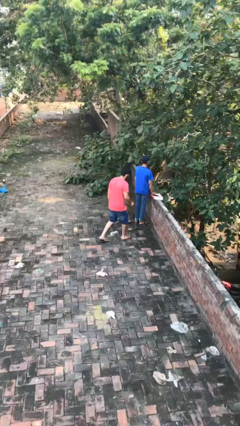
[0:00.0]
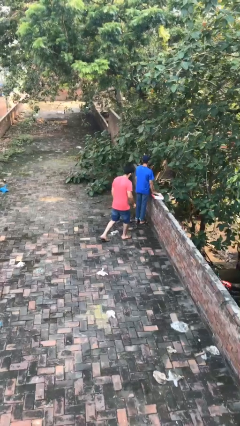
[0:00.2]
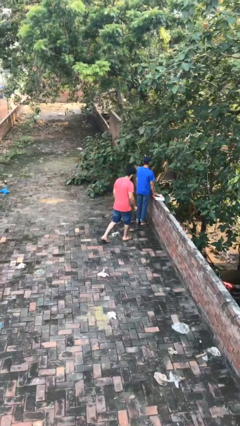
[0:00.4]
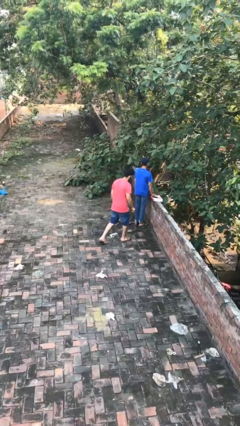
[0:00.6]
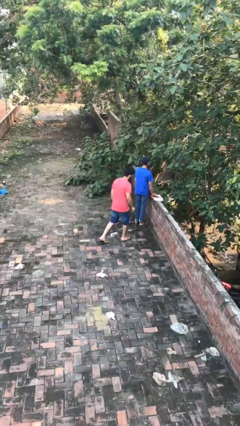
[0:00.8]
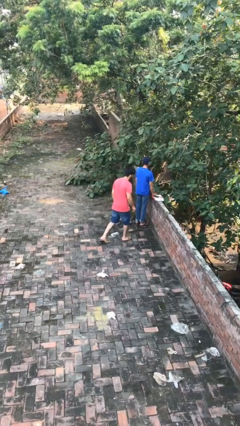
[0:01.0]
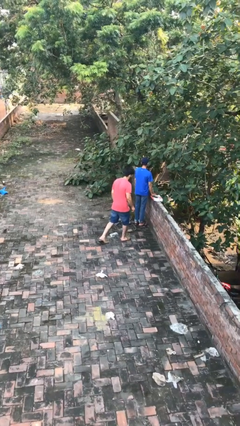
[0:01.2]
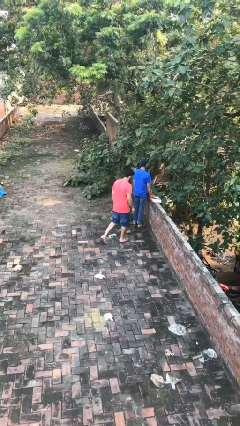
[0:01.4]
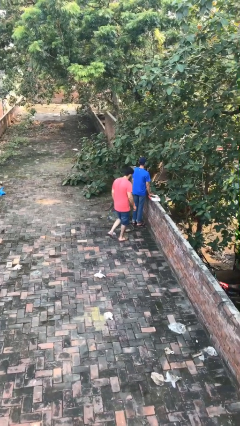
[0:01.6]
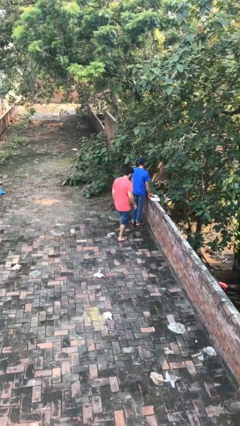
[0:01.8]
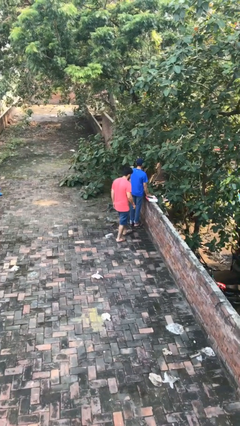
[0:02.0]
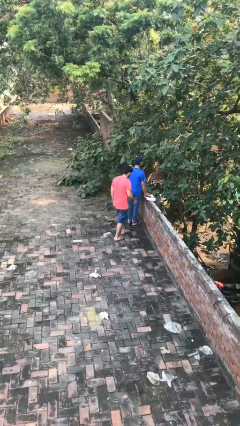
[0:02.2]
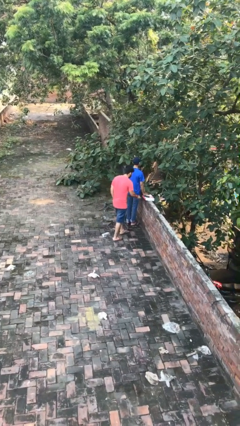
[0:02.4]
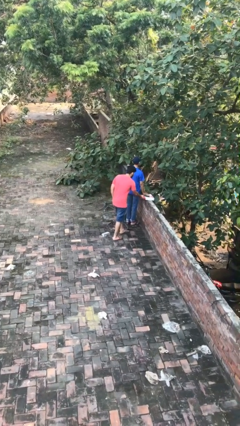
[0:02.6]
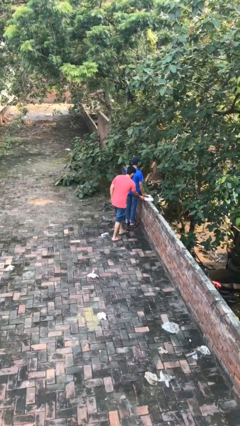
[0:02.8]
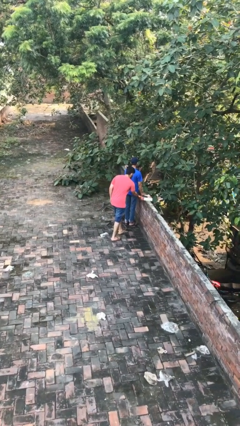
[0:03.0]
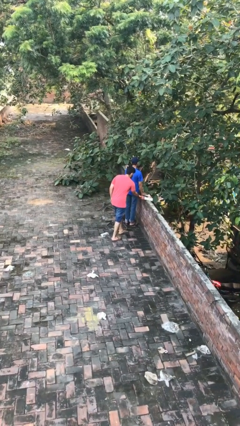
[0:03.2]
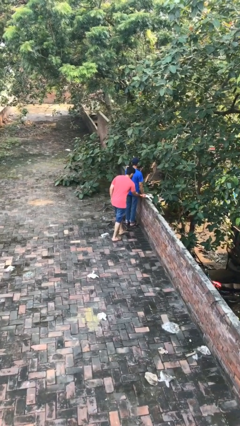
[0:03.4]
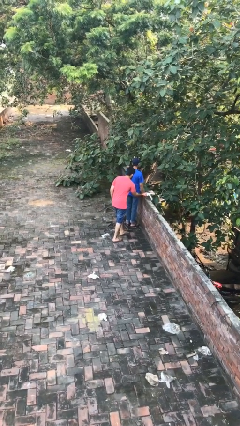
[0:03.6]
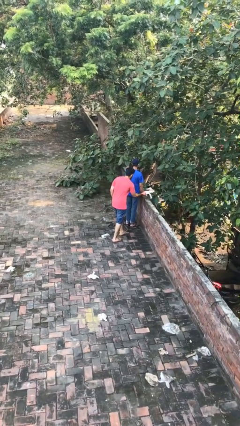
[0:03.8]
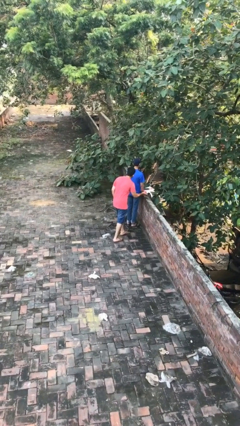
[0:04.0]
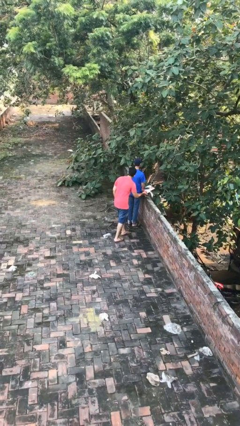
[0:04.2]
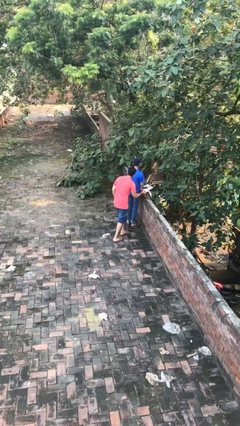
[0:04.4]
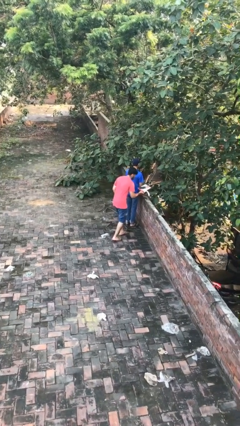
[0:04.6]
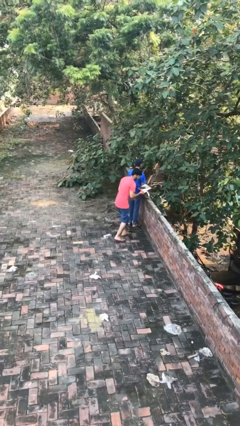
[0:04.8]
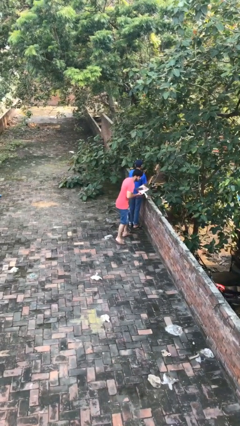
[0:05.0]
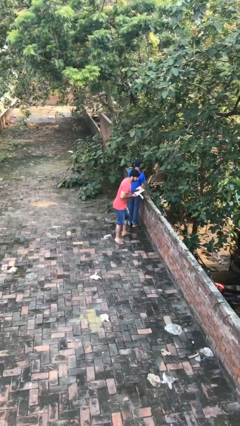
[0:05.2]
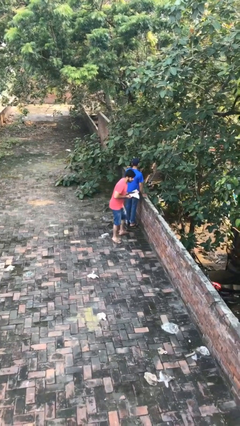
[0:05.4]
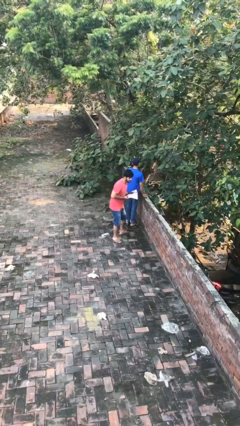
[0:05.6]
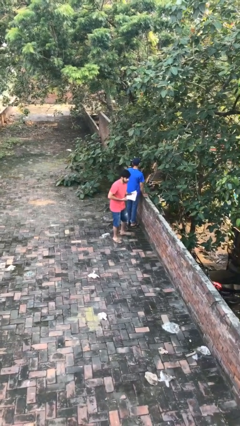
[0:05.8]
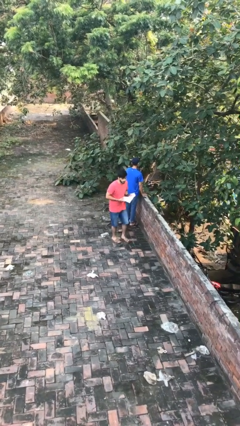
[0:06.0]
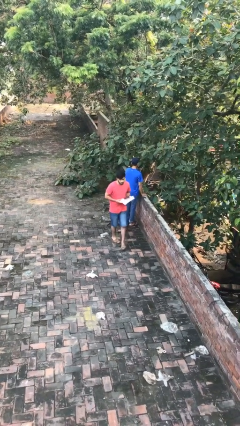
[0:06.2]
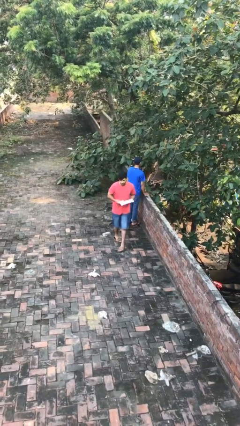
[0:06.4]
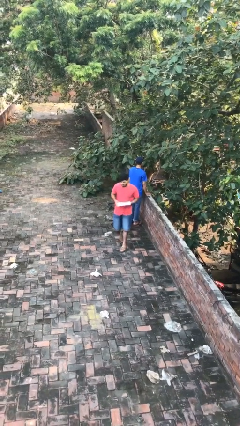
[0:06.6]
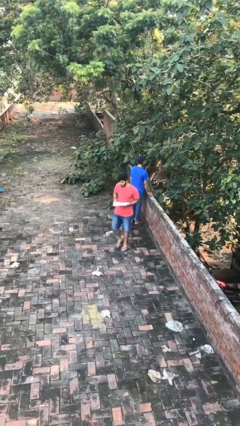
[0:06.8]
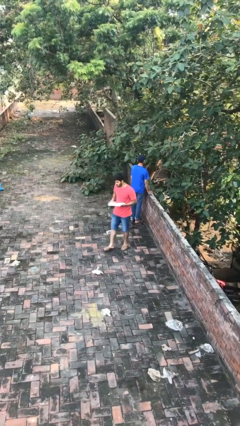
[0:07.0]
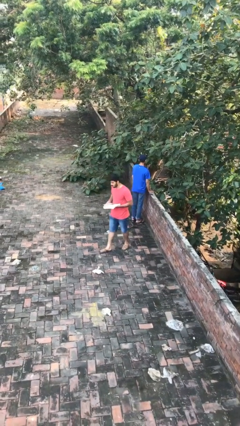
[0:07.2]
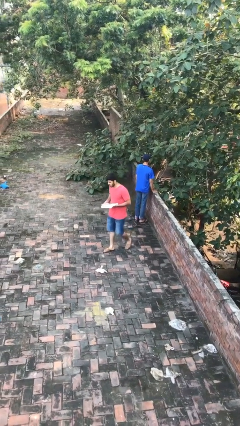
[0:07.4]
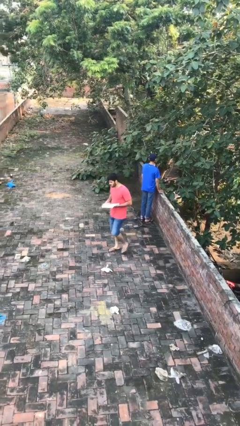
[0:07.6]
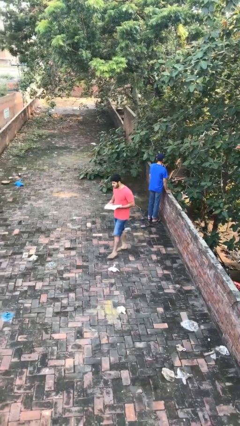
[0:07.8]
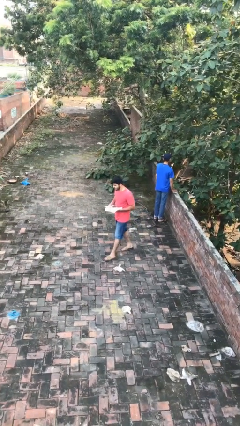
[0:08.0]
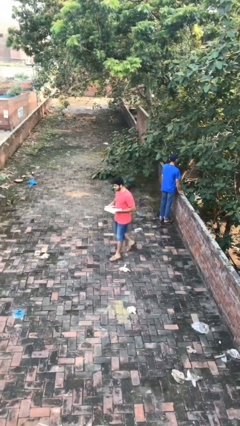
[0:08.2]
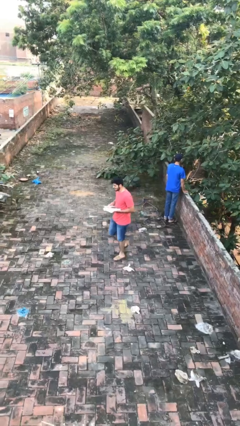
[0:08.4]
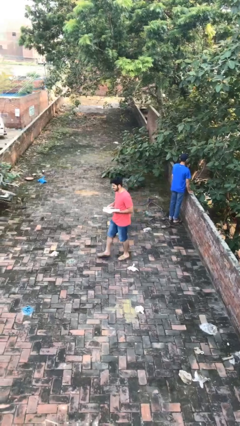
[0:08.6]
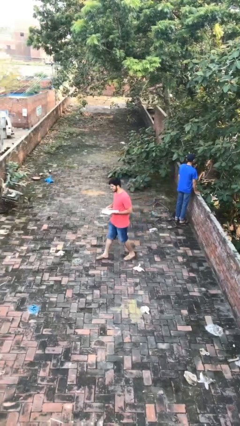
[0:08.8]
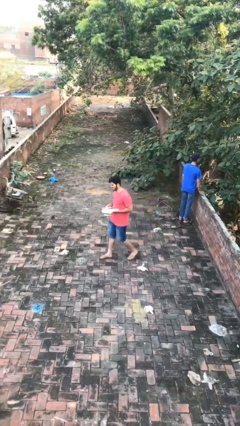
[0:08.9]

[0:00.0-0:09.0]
person steals object from person

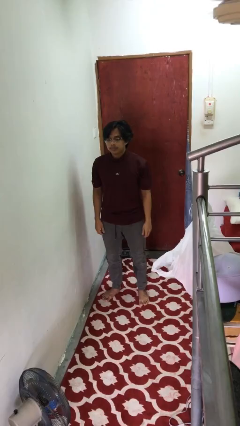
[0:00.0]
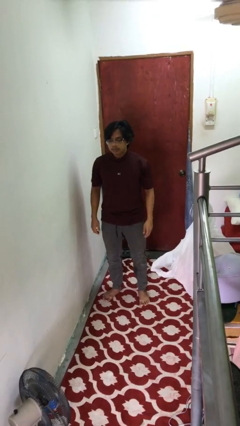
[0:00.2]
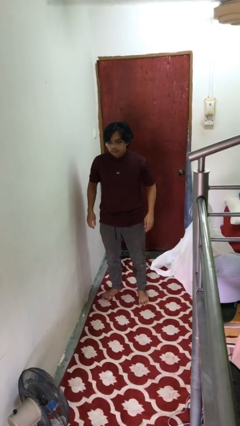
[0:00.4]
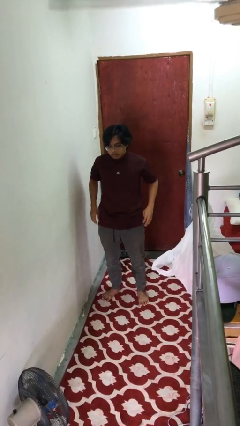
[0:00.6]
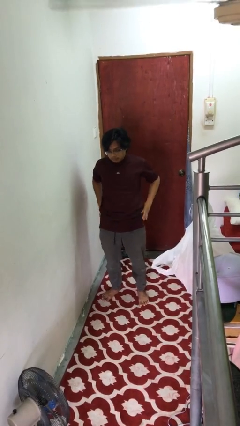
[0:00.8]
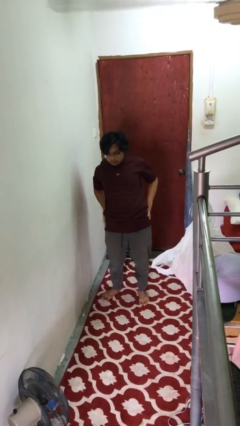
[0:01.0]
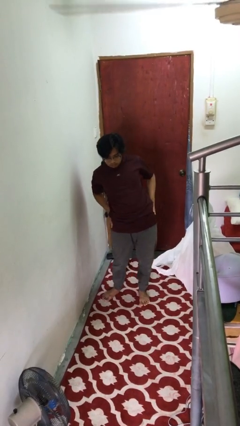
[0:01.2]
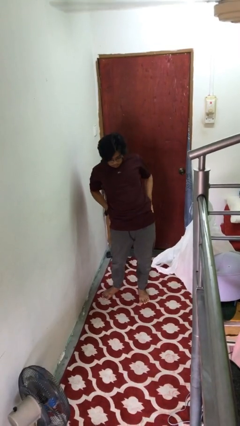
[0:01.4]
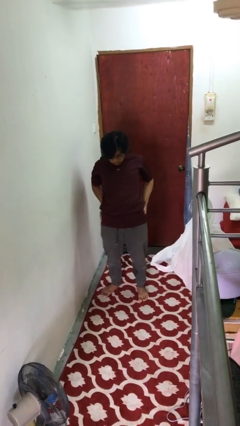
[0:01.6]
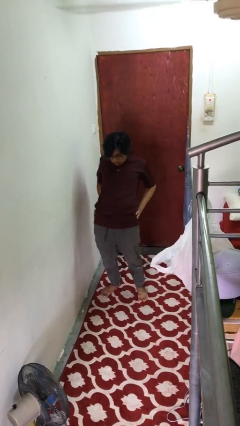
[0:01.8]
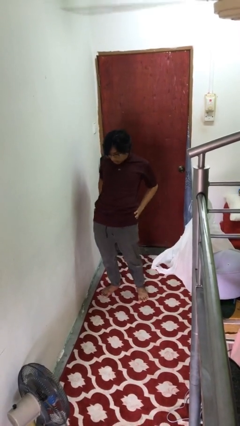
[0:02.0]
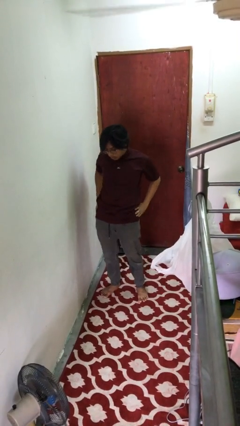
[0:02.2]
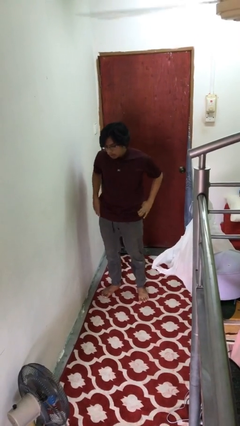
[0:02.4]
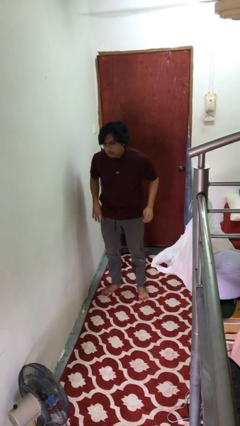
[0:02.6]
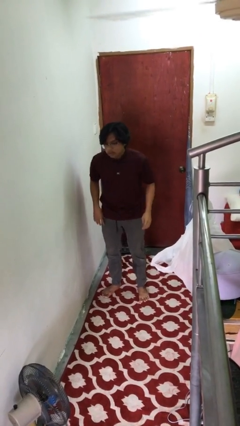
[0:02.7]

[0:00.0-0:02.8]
person stretches back

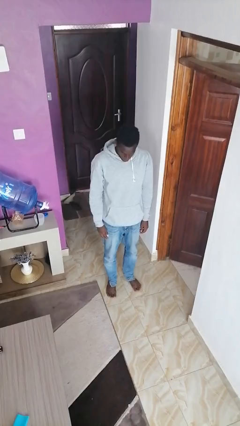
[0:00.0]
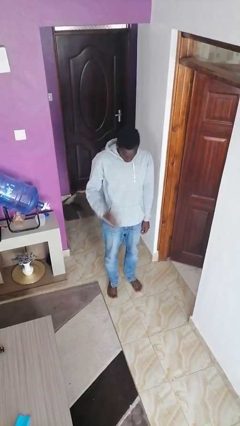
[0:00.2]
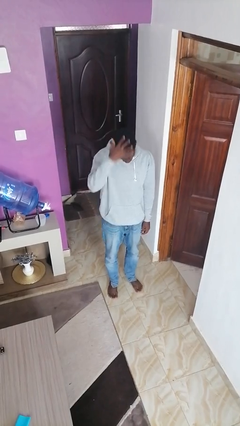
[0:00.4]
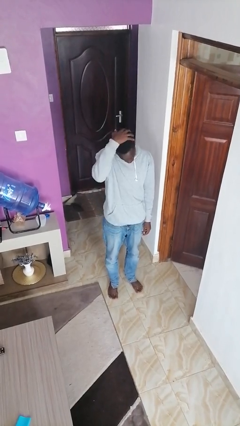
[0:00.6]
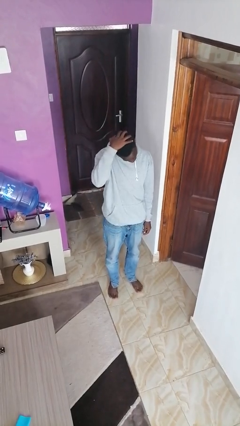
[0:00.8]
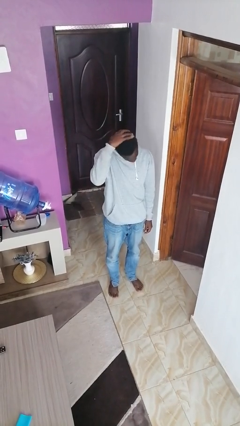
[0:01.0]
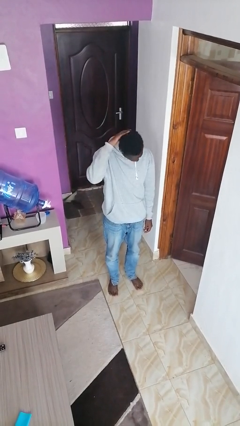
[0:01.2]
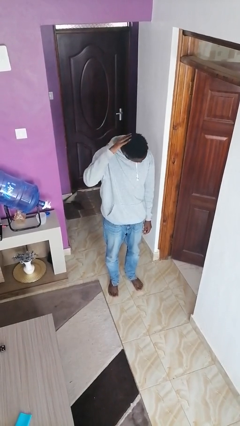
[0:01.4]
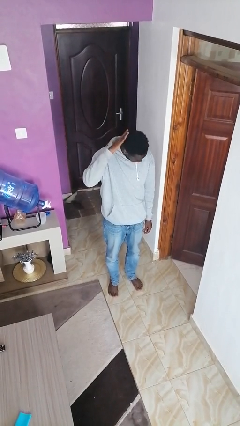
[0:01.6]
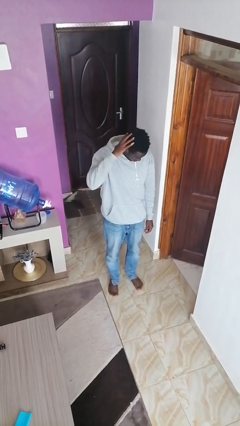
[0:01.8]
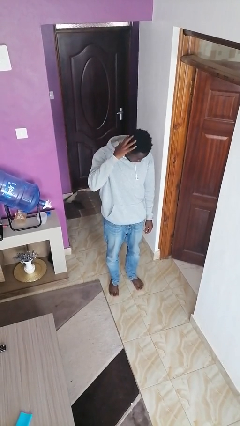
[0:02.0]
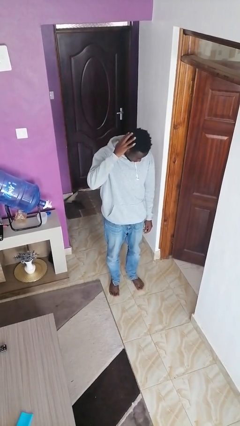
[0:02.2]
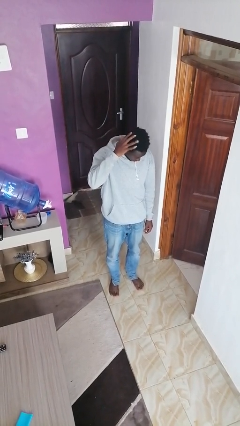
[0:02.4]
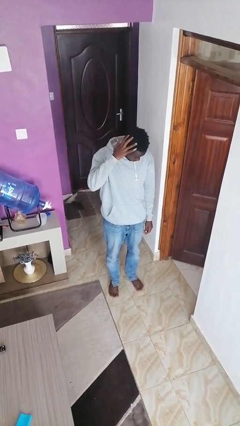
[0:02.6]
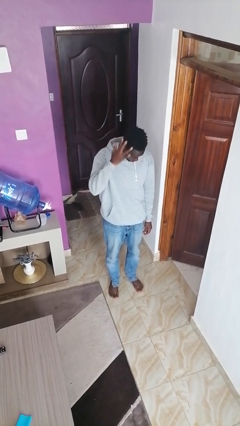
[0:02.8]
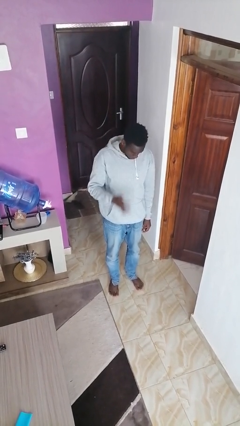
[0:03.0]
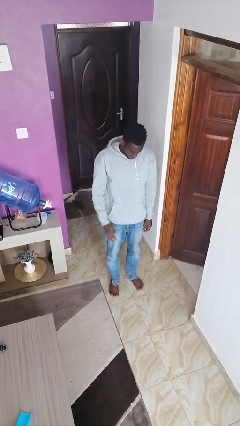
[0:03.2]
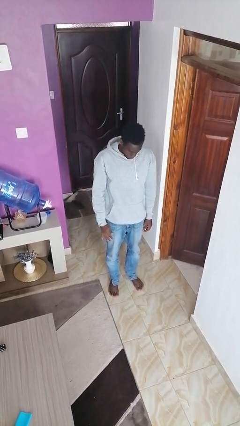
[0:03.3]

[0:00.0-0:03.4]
person strokes hair

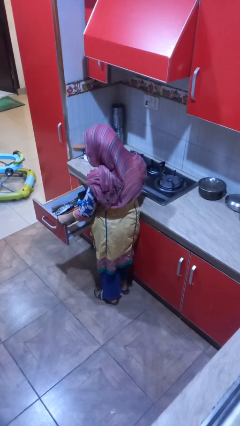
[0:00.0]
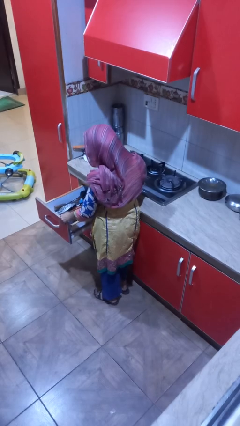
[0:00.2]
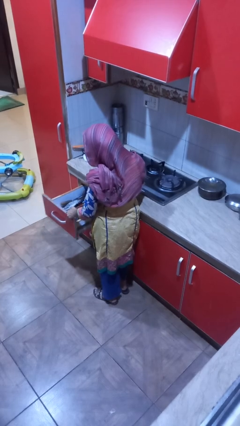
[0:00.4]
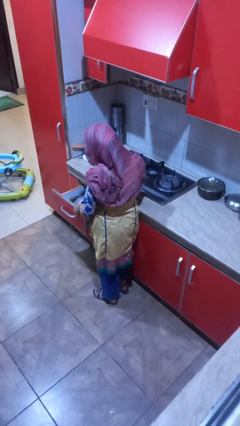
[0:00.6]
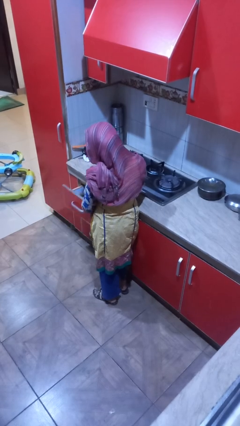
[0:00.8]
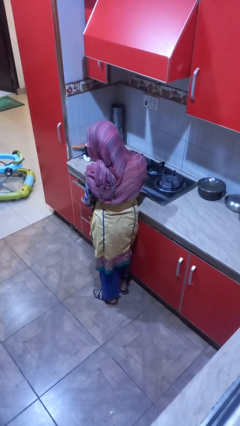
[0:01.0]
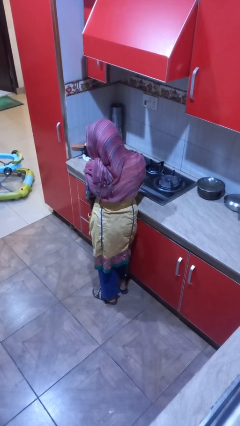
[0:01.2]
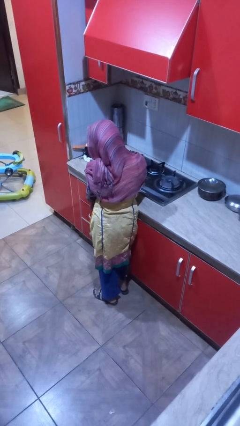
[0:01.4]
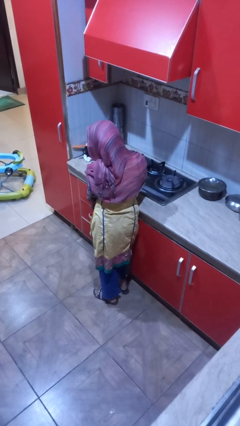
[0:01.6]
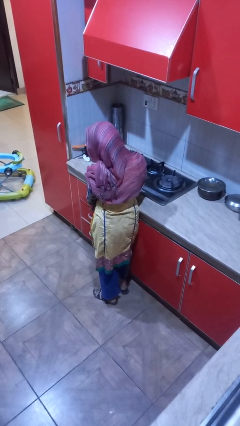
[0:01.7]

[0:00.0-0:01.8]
person closes kitchen drawer

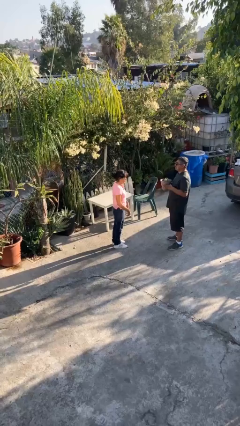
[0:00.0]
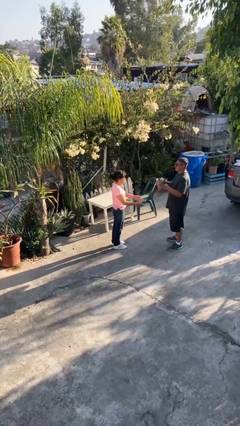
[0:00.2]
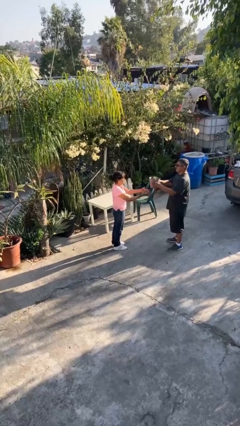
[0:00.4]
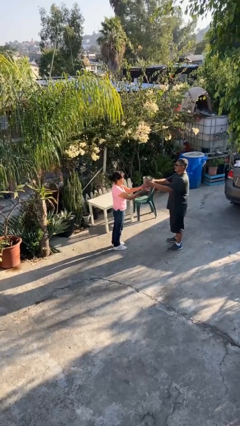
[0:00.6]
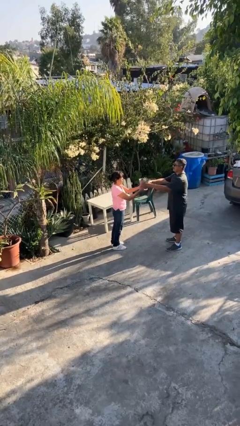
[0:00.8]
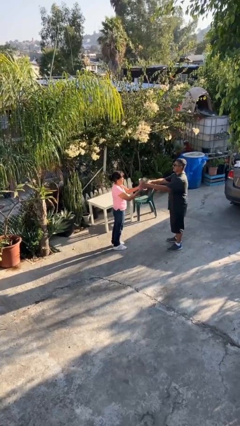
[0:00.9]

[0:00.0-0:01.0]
person transfers object to person
